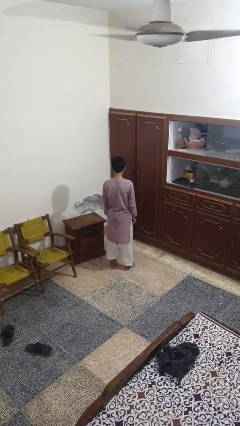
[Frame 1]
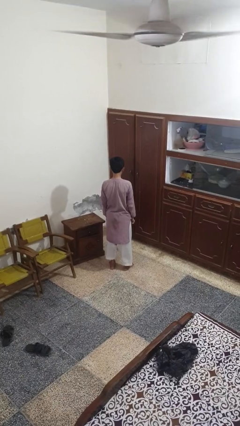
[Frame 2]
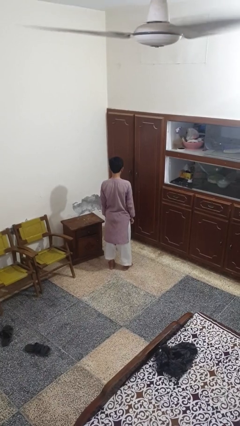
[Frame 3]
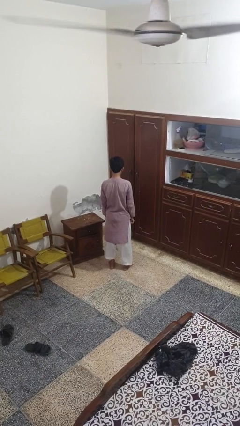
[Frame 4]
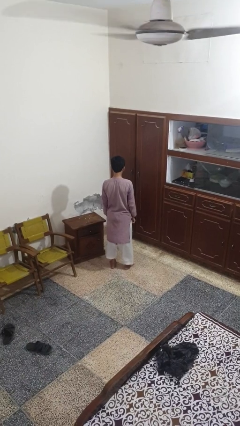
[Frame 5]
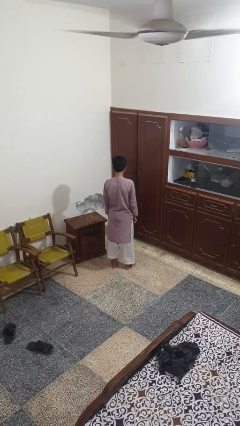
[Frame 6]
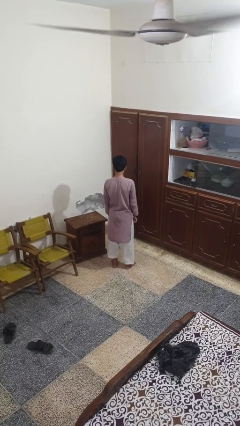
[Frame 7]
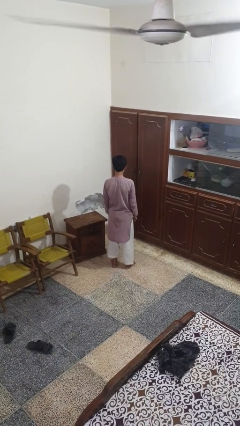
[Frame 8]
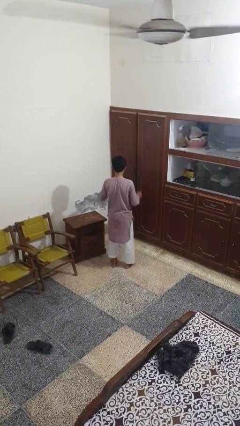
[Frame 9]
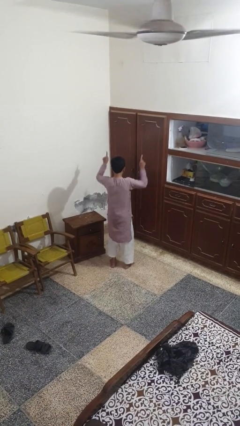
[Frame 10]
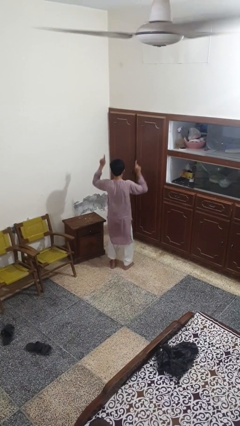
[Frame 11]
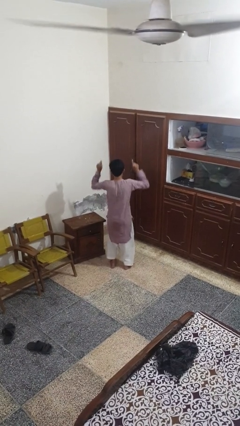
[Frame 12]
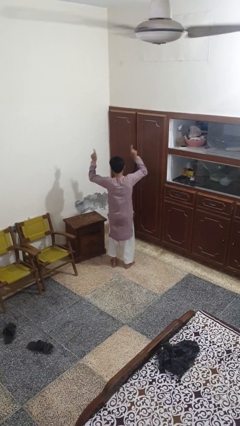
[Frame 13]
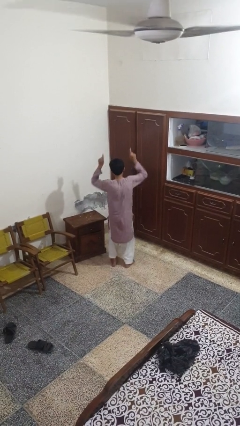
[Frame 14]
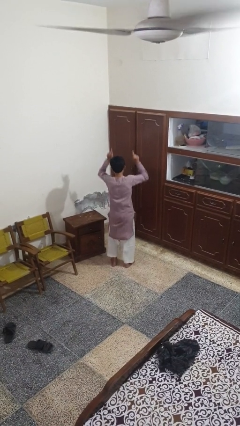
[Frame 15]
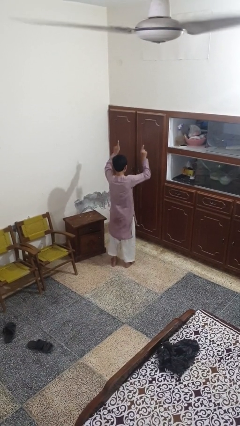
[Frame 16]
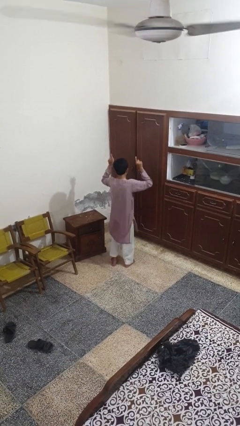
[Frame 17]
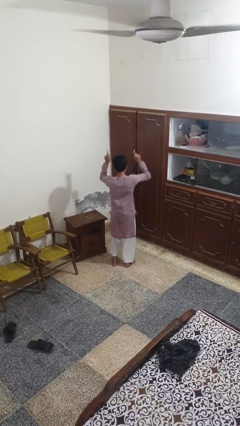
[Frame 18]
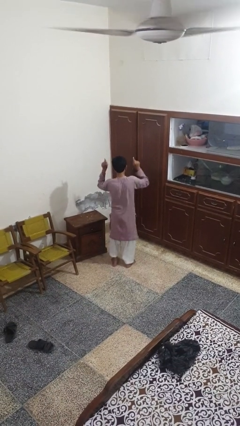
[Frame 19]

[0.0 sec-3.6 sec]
person dances in place

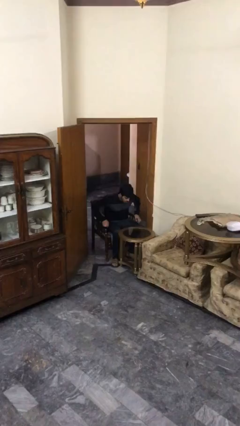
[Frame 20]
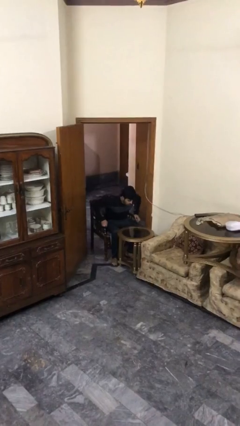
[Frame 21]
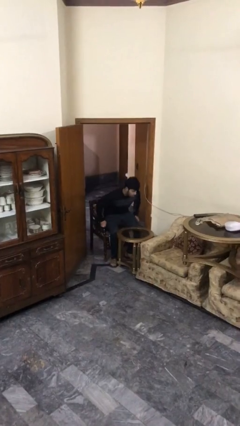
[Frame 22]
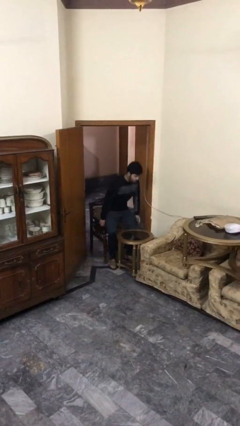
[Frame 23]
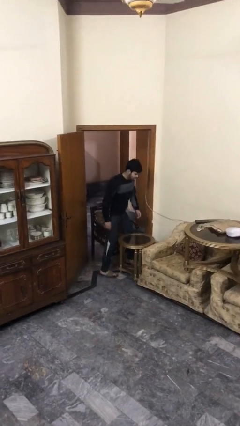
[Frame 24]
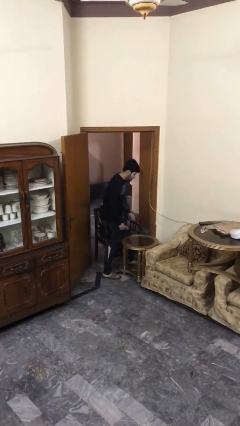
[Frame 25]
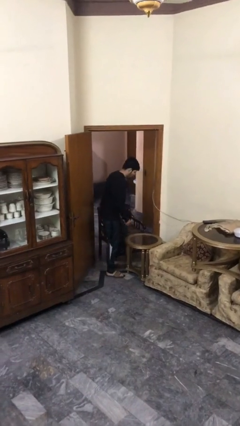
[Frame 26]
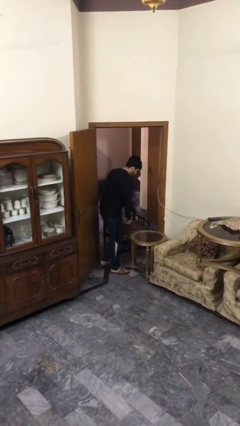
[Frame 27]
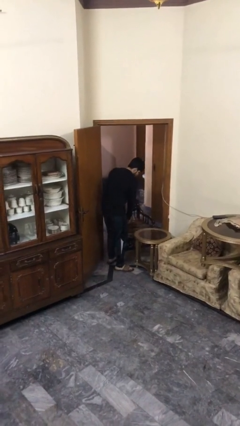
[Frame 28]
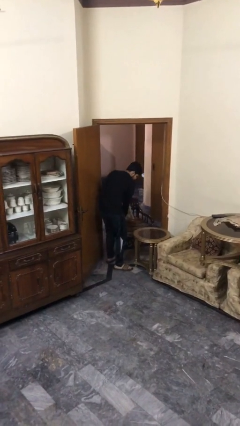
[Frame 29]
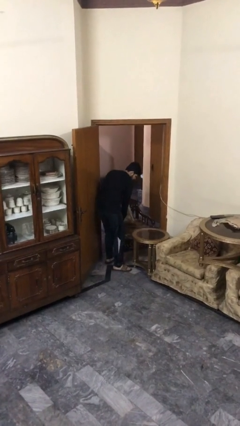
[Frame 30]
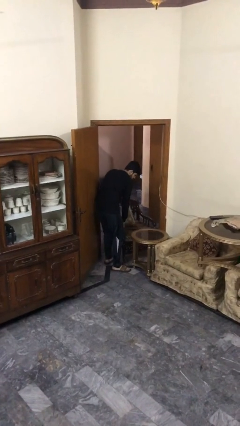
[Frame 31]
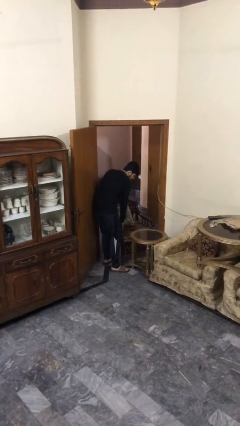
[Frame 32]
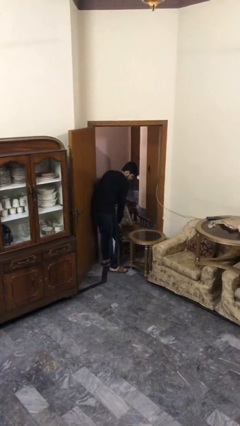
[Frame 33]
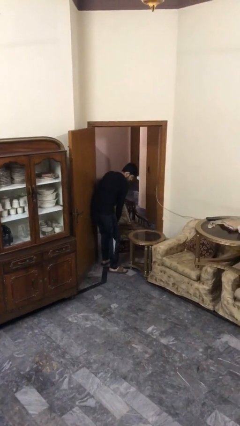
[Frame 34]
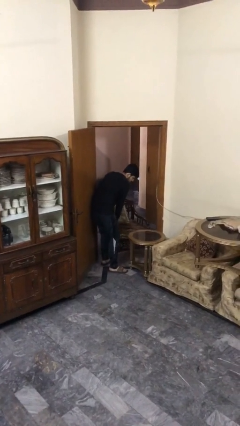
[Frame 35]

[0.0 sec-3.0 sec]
person stands up

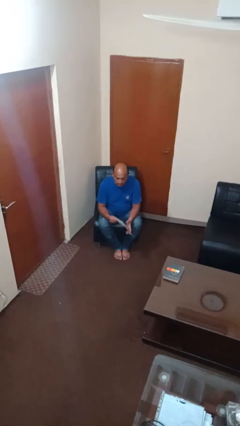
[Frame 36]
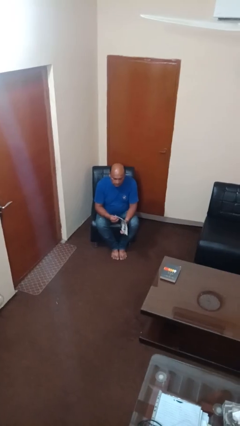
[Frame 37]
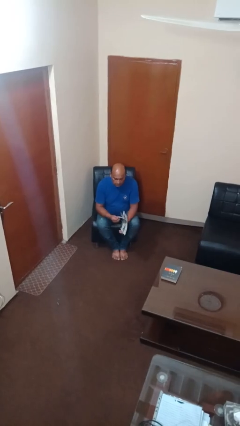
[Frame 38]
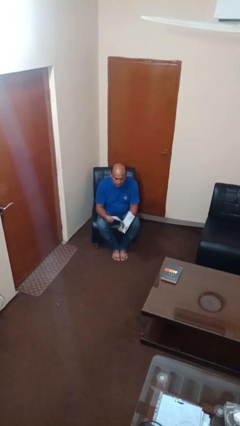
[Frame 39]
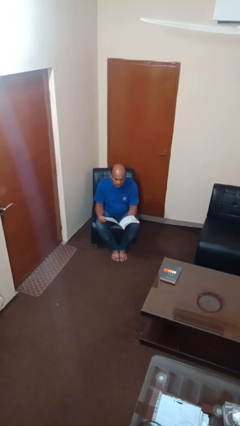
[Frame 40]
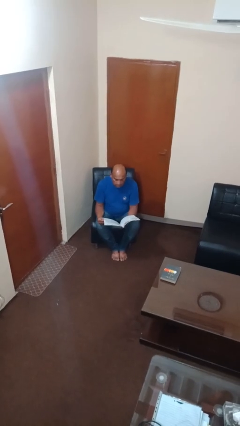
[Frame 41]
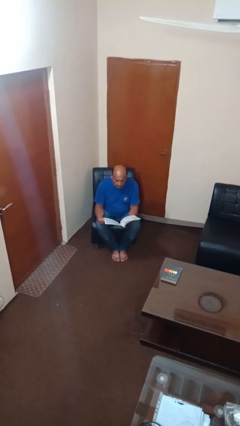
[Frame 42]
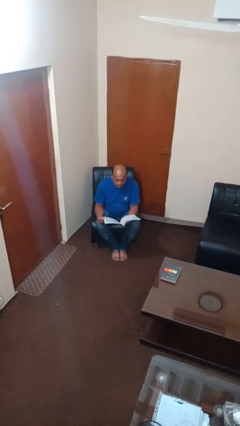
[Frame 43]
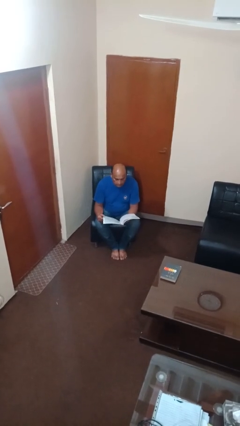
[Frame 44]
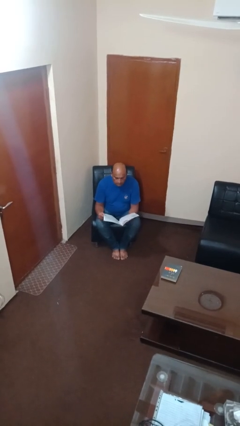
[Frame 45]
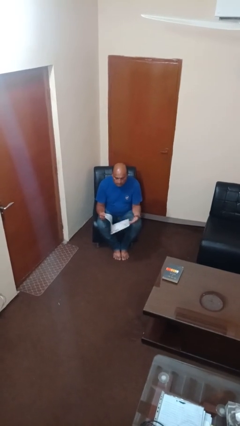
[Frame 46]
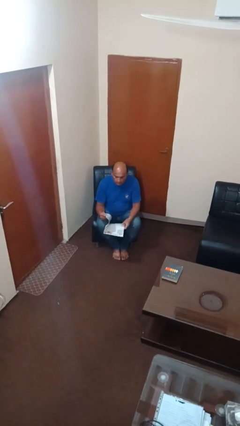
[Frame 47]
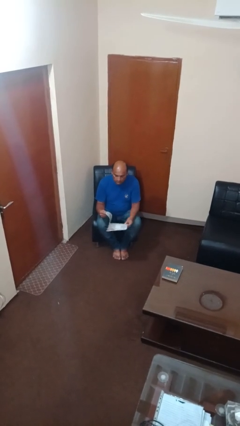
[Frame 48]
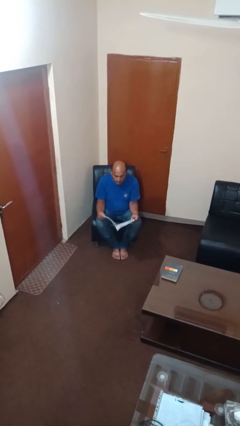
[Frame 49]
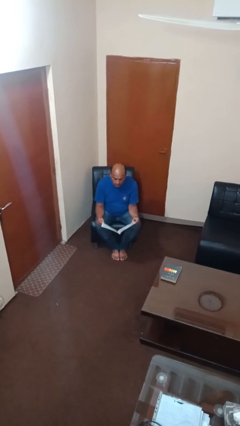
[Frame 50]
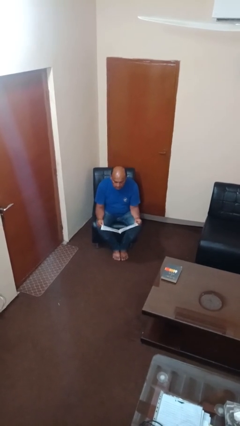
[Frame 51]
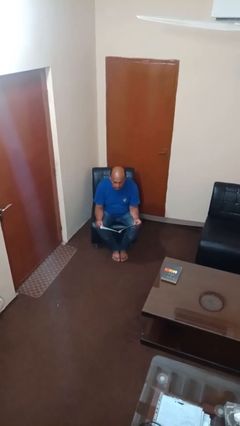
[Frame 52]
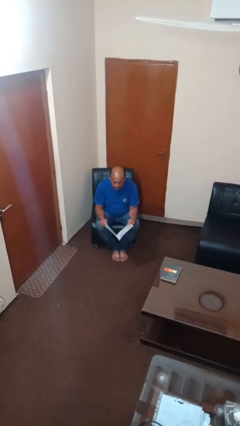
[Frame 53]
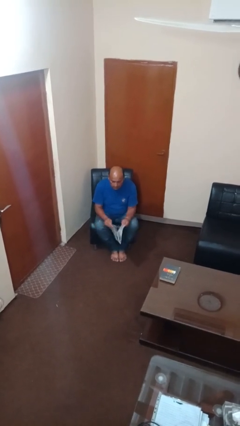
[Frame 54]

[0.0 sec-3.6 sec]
person reads magazine

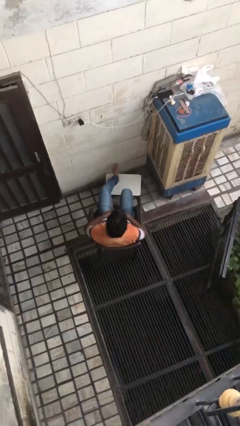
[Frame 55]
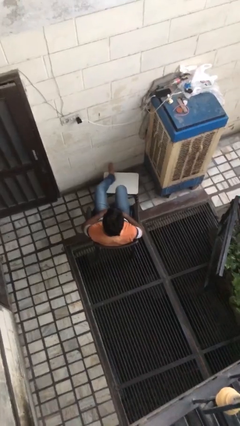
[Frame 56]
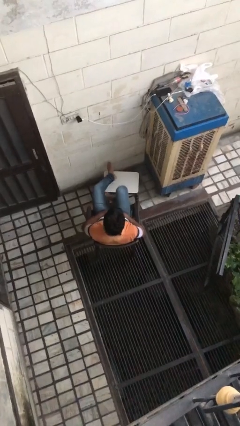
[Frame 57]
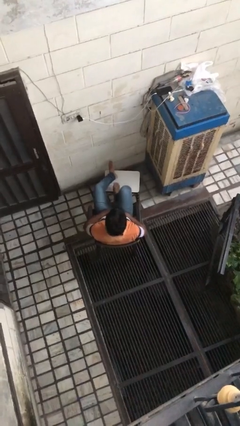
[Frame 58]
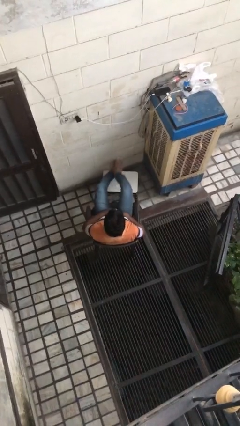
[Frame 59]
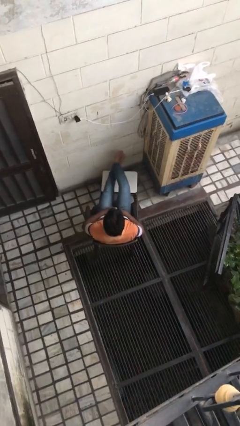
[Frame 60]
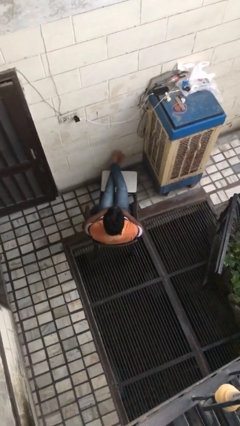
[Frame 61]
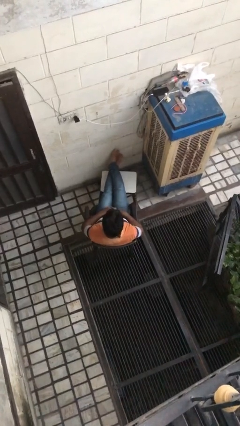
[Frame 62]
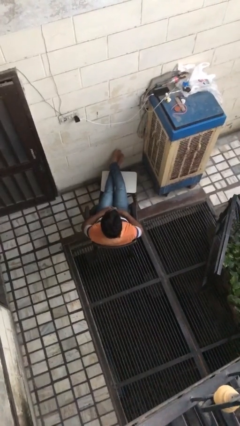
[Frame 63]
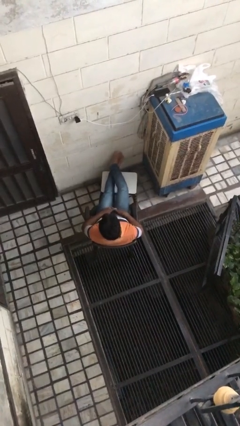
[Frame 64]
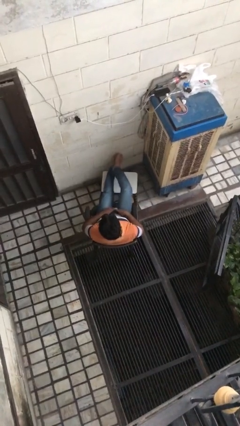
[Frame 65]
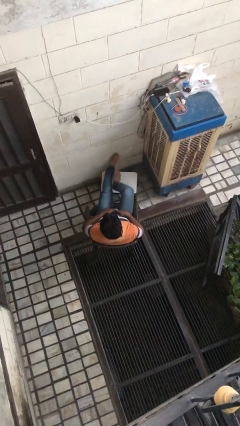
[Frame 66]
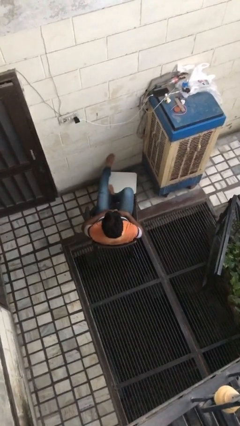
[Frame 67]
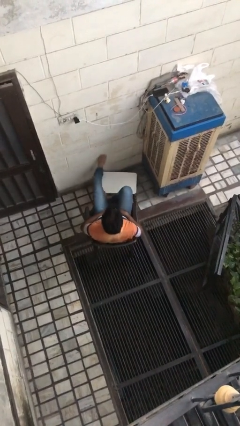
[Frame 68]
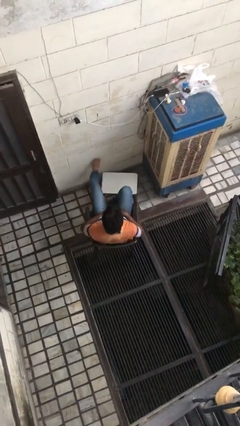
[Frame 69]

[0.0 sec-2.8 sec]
person puts feet up

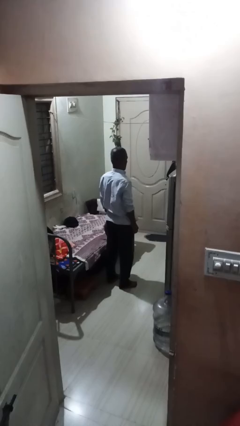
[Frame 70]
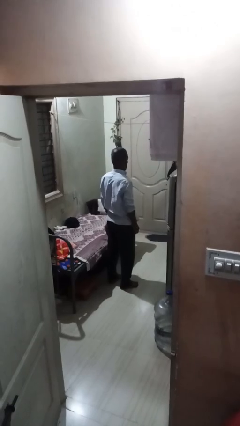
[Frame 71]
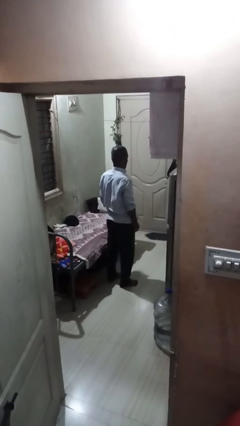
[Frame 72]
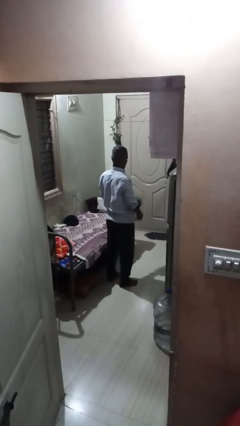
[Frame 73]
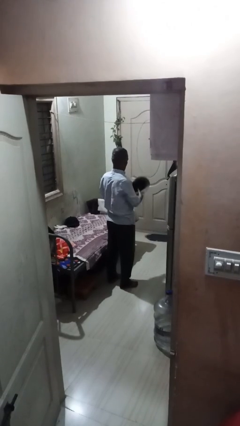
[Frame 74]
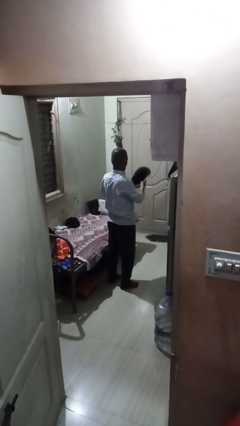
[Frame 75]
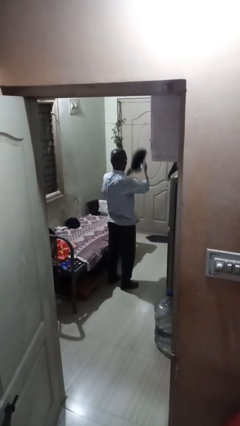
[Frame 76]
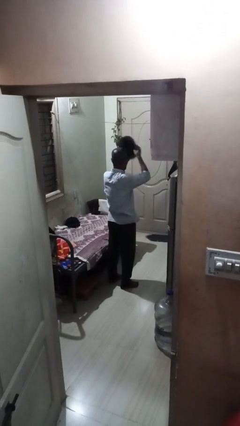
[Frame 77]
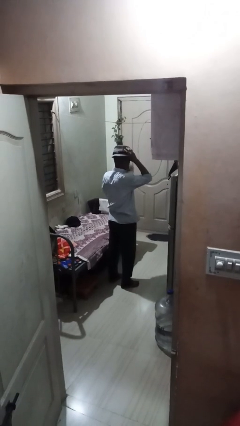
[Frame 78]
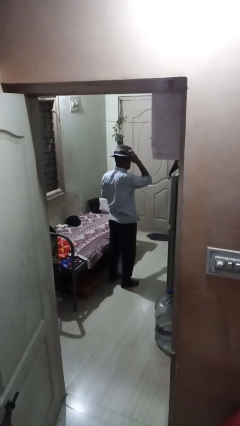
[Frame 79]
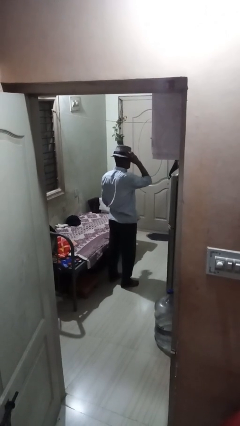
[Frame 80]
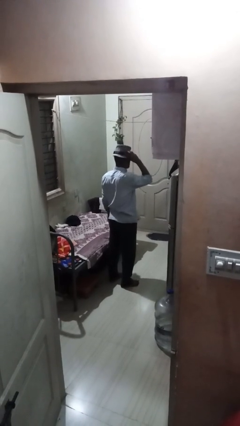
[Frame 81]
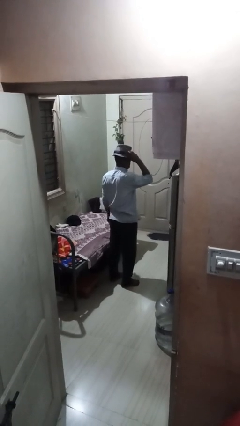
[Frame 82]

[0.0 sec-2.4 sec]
person puts on hat

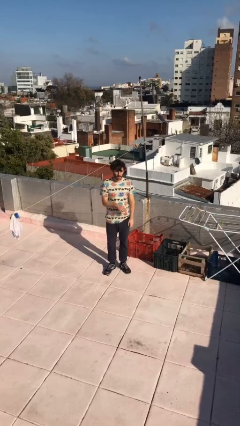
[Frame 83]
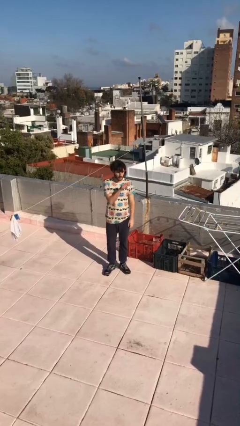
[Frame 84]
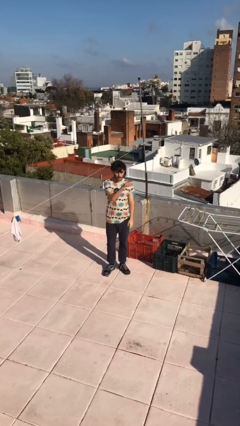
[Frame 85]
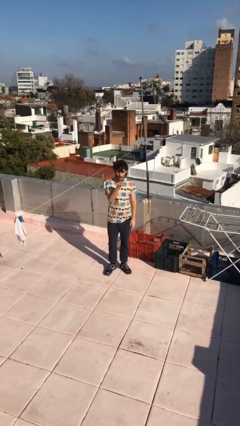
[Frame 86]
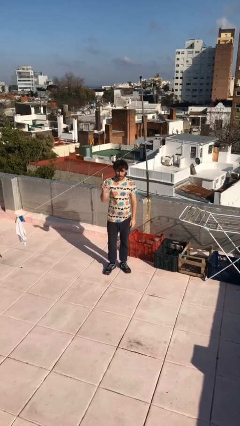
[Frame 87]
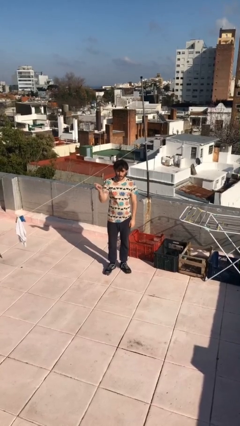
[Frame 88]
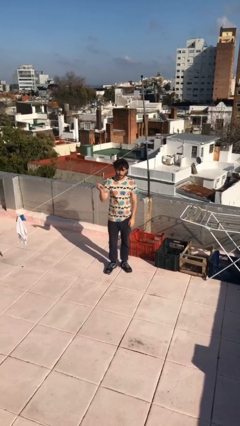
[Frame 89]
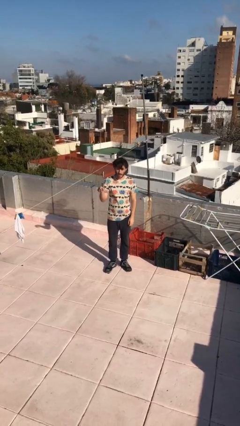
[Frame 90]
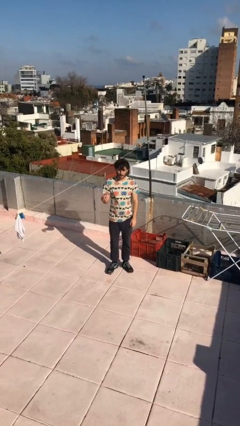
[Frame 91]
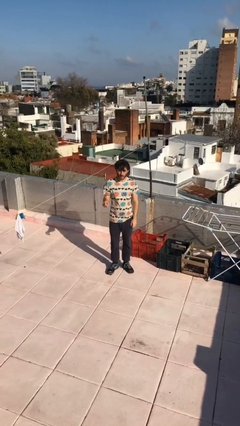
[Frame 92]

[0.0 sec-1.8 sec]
person gestures swipe right

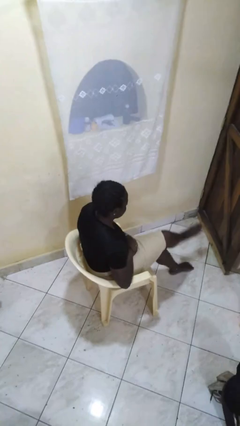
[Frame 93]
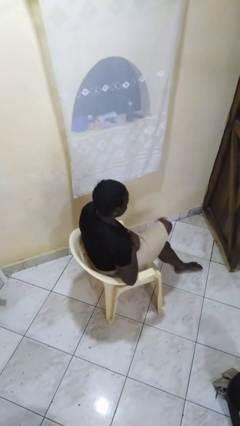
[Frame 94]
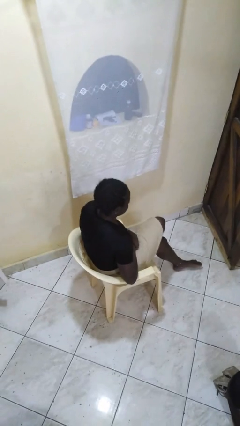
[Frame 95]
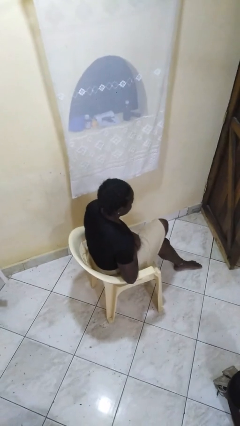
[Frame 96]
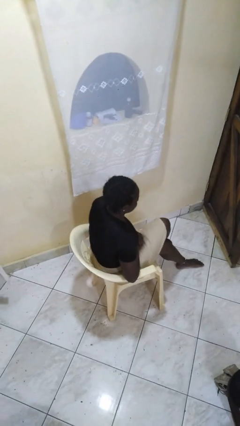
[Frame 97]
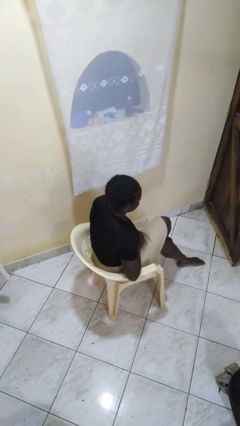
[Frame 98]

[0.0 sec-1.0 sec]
person crosses legs
